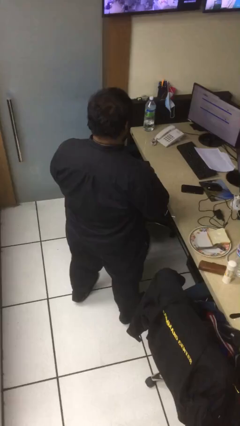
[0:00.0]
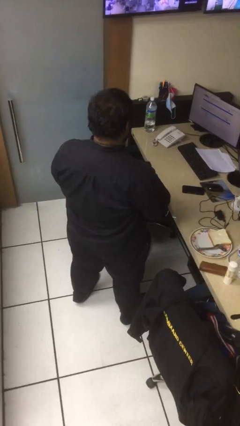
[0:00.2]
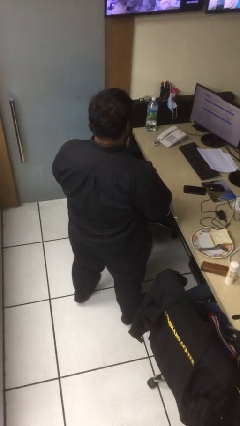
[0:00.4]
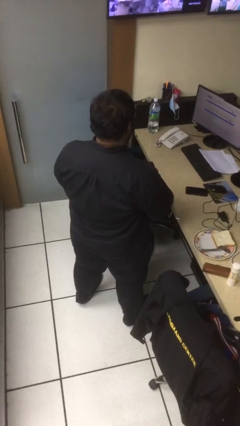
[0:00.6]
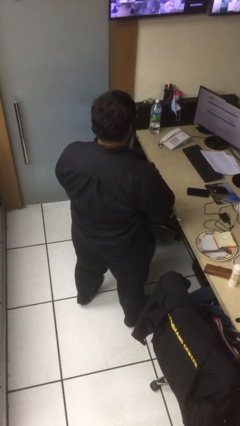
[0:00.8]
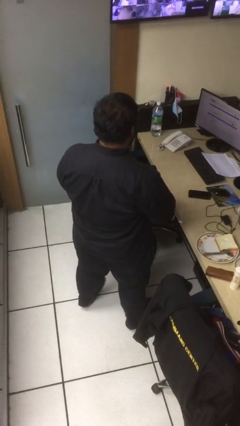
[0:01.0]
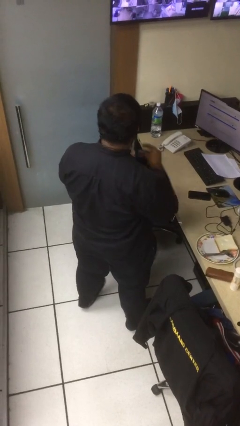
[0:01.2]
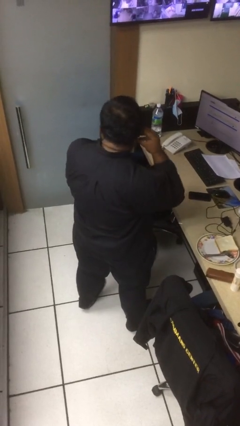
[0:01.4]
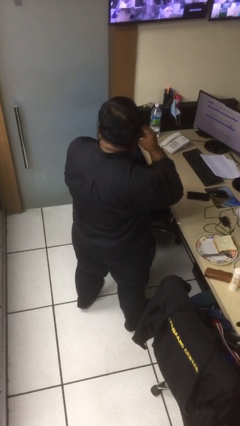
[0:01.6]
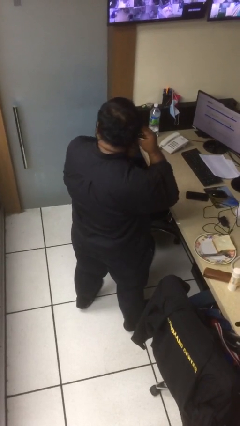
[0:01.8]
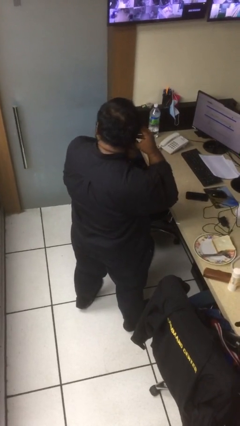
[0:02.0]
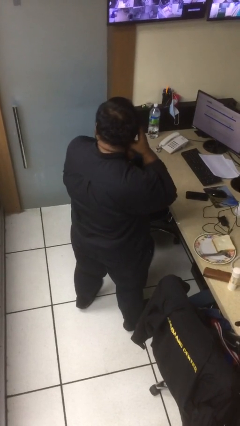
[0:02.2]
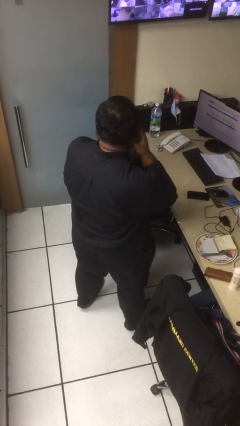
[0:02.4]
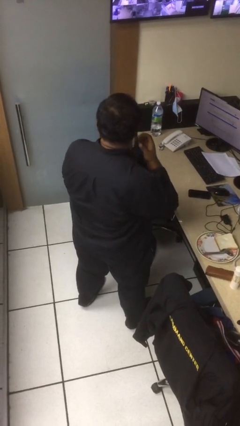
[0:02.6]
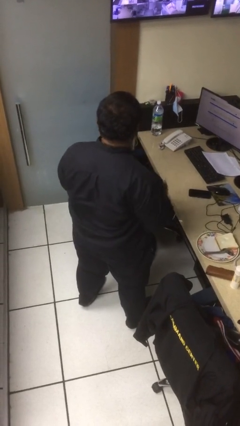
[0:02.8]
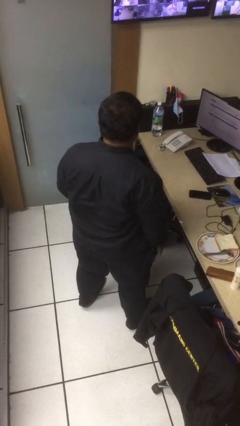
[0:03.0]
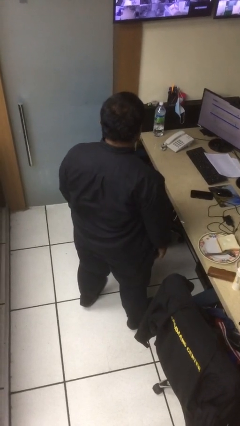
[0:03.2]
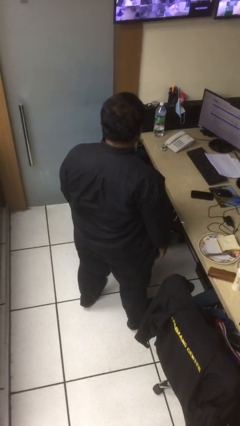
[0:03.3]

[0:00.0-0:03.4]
person puts on earrings

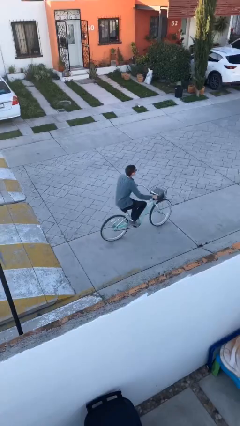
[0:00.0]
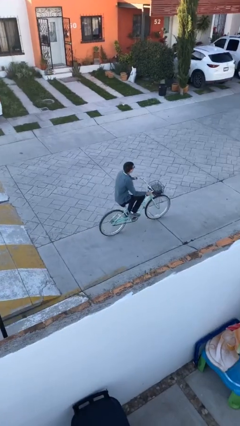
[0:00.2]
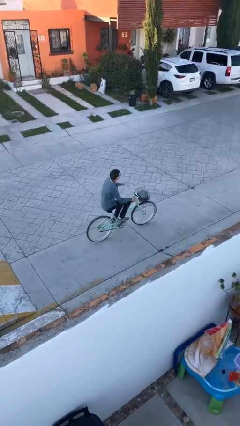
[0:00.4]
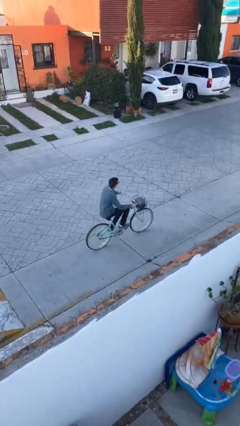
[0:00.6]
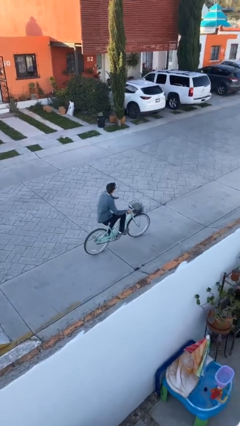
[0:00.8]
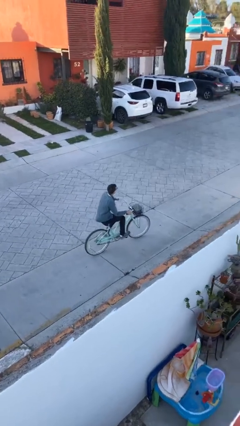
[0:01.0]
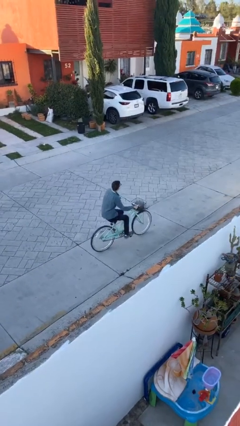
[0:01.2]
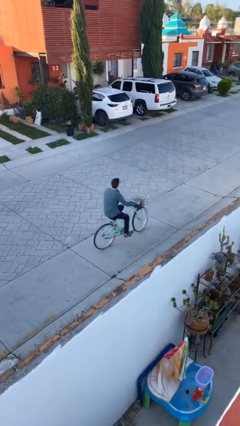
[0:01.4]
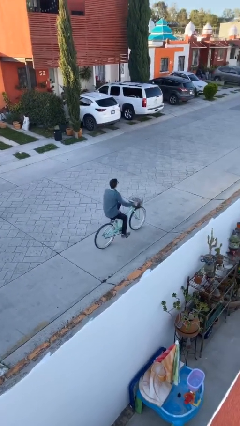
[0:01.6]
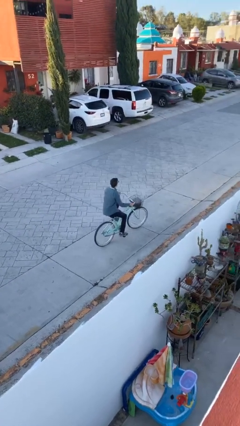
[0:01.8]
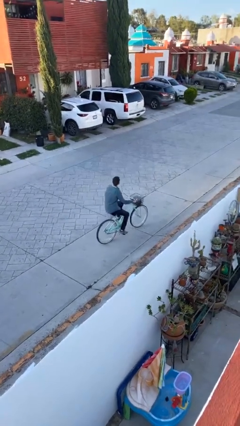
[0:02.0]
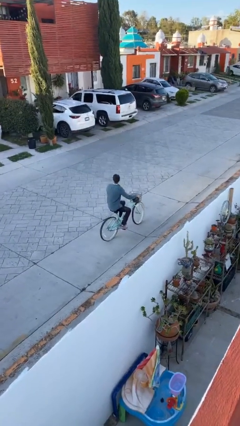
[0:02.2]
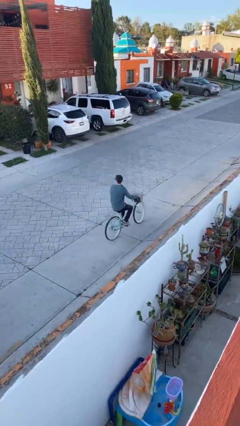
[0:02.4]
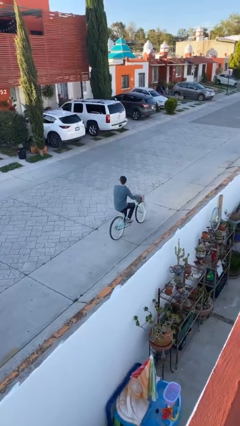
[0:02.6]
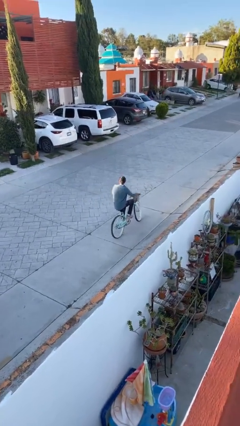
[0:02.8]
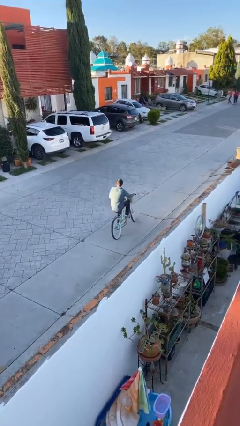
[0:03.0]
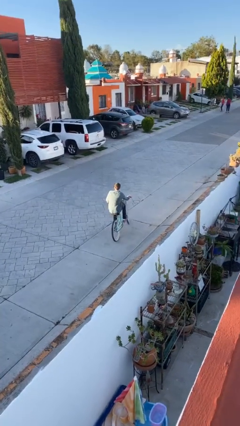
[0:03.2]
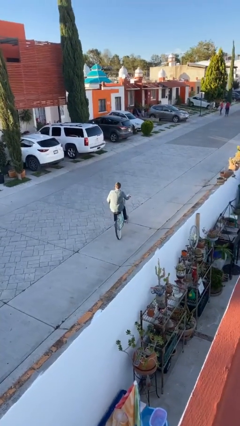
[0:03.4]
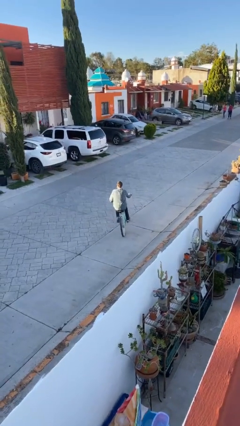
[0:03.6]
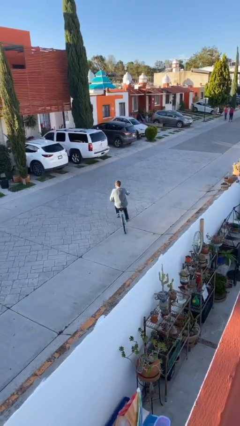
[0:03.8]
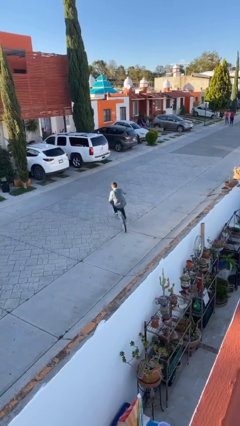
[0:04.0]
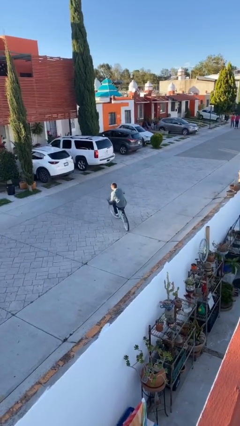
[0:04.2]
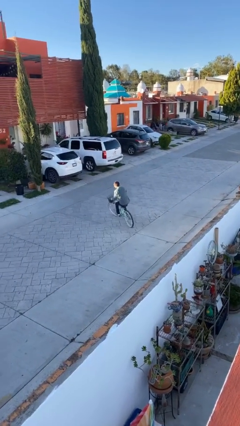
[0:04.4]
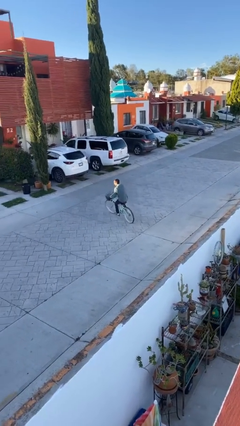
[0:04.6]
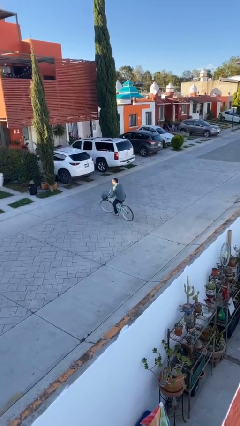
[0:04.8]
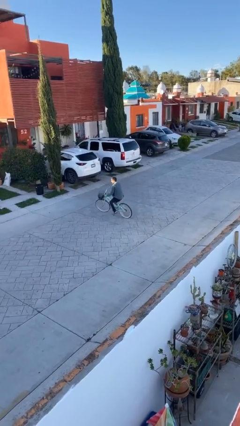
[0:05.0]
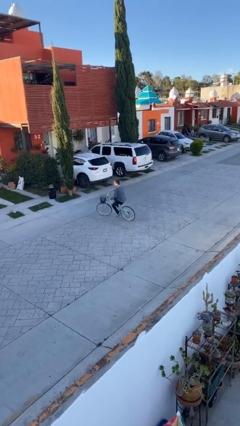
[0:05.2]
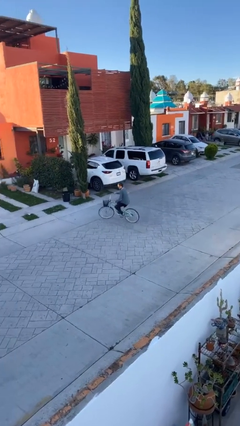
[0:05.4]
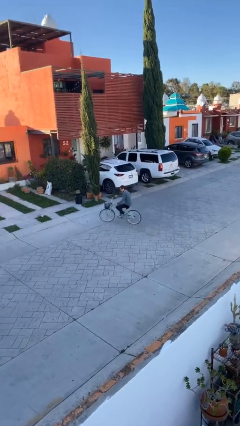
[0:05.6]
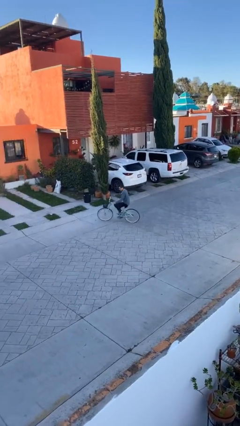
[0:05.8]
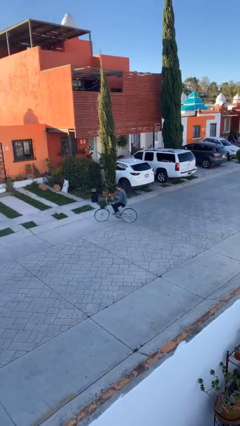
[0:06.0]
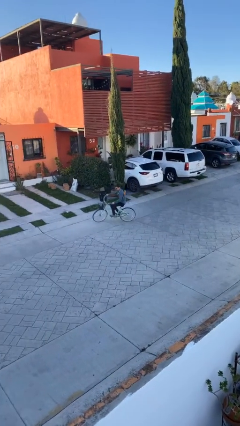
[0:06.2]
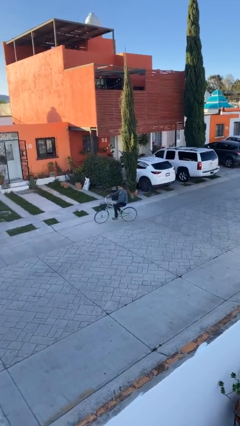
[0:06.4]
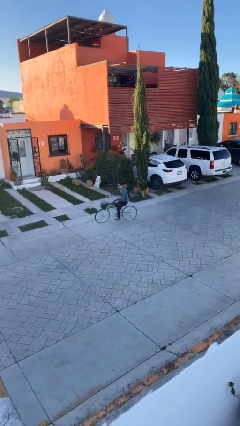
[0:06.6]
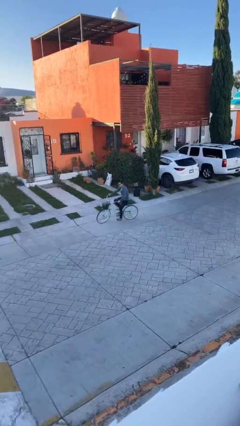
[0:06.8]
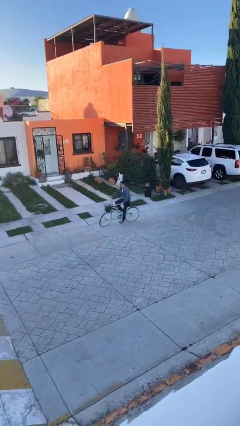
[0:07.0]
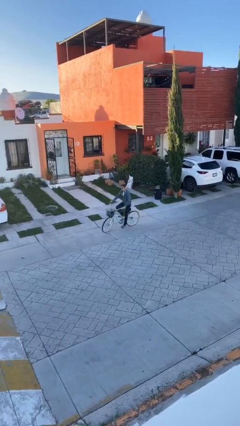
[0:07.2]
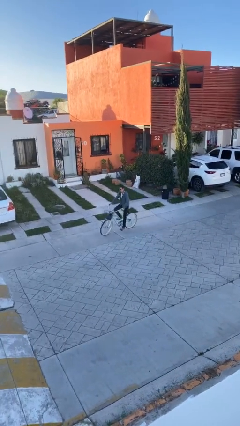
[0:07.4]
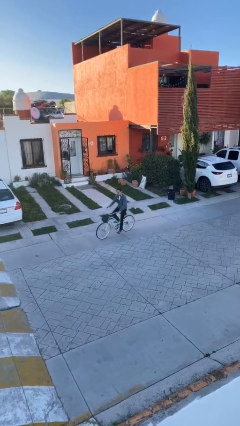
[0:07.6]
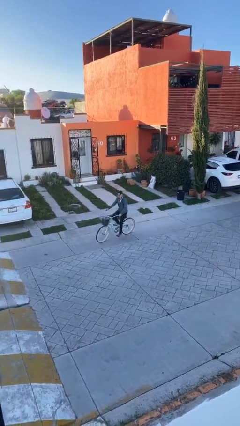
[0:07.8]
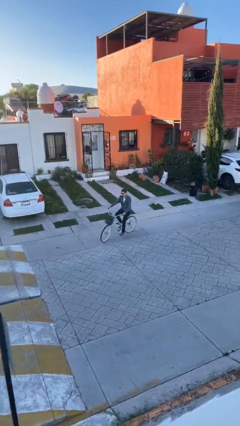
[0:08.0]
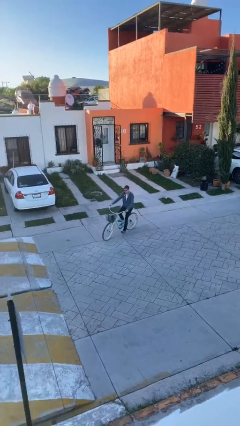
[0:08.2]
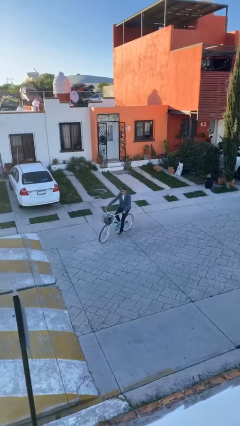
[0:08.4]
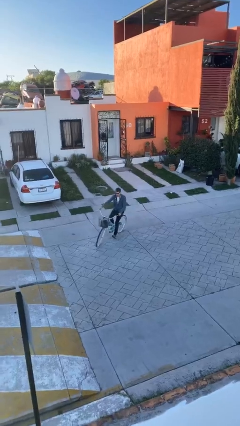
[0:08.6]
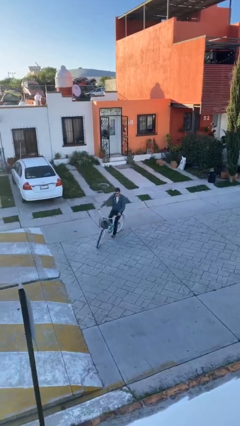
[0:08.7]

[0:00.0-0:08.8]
person rides bicycle

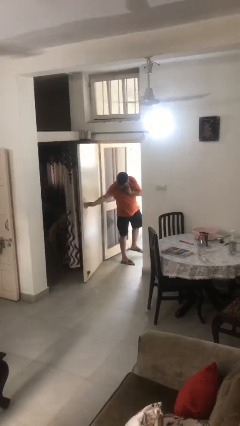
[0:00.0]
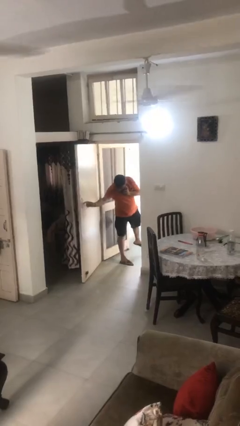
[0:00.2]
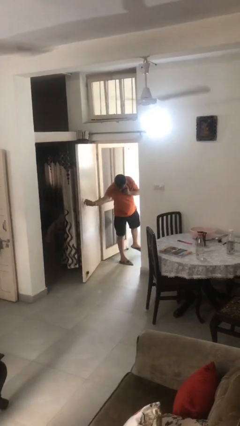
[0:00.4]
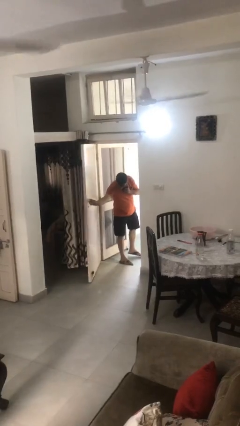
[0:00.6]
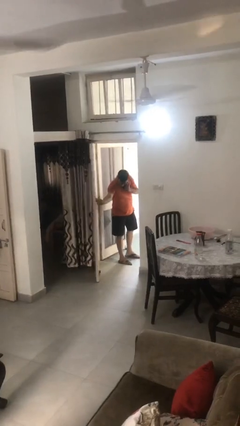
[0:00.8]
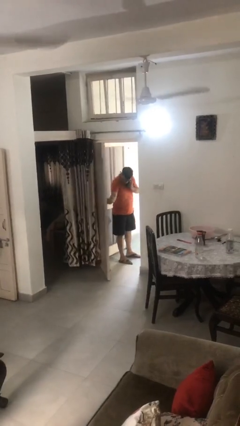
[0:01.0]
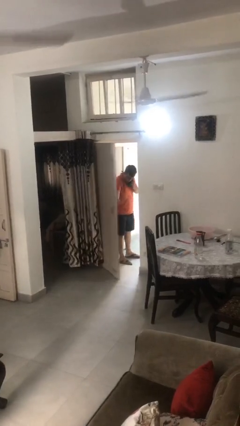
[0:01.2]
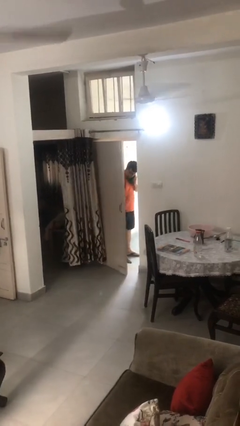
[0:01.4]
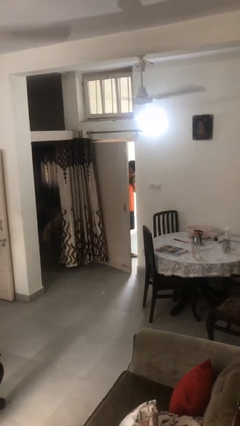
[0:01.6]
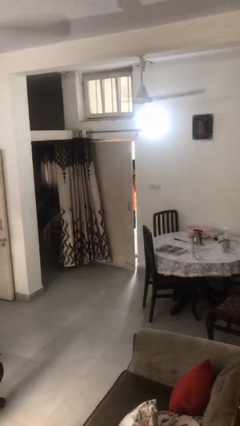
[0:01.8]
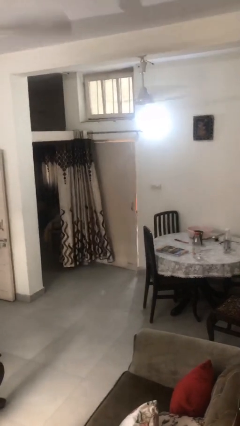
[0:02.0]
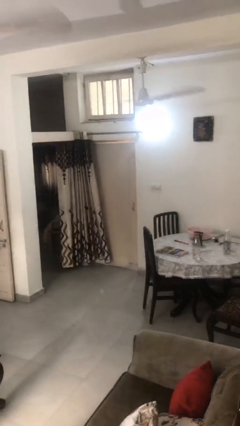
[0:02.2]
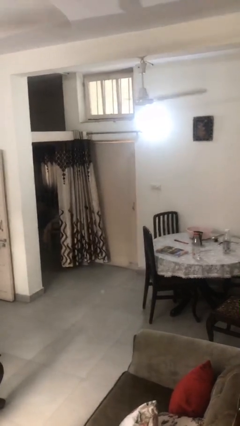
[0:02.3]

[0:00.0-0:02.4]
person closes facility door

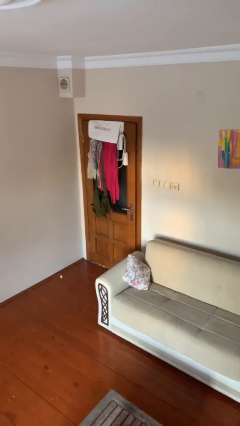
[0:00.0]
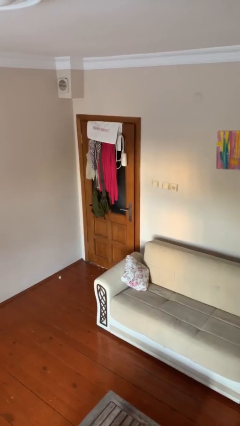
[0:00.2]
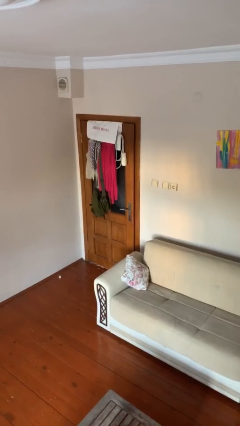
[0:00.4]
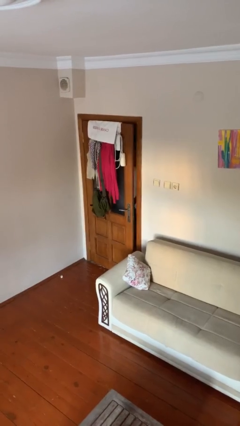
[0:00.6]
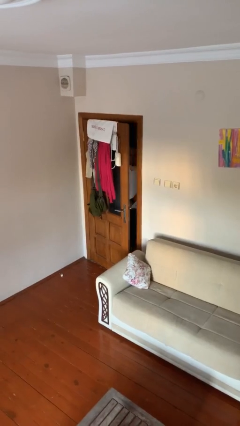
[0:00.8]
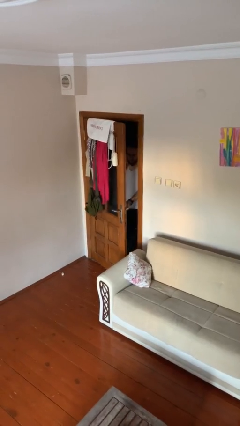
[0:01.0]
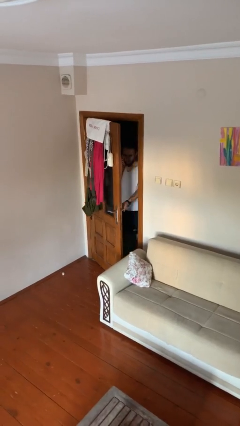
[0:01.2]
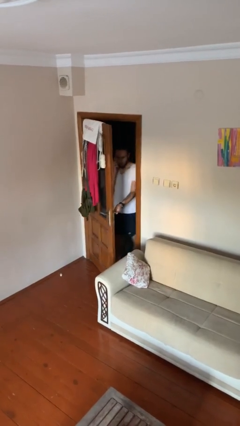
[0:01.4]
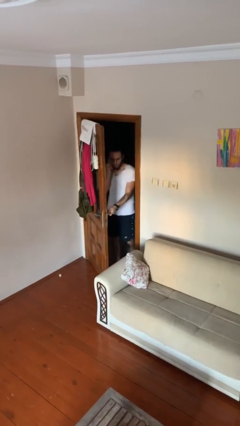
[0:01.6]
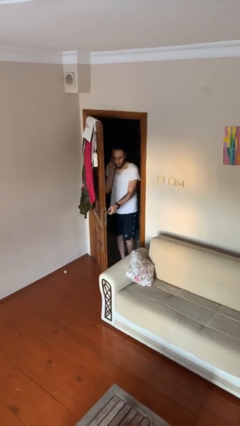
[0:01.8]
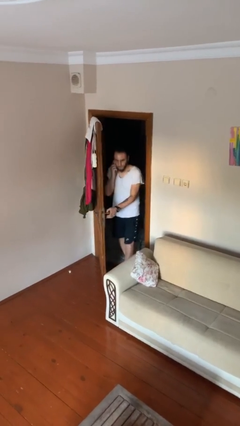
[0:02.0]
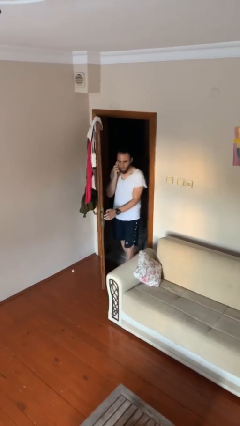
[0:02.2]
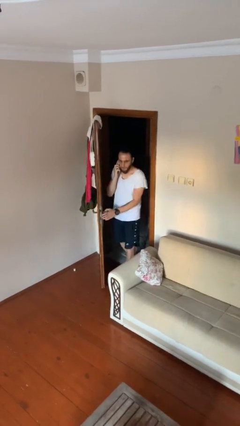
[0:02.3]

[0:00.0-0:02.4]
person opens facility door

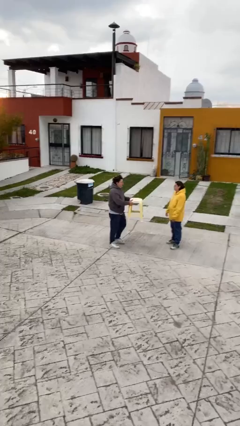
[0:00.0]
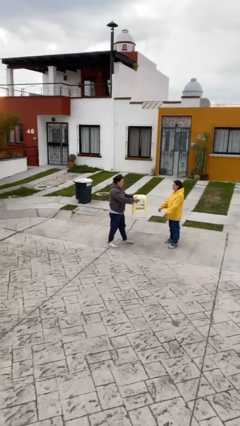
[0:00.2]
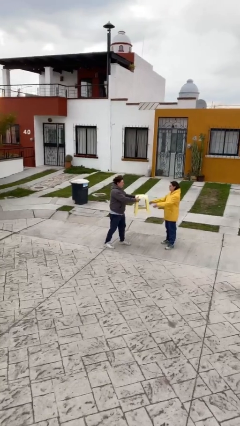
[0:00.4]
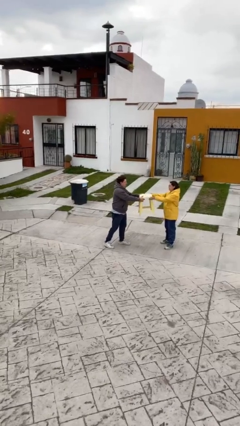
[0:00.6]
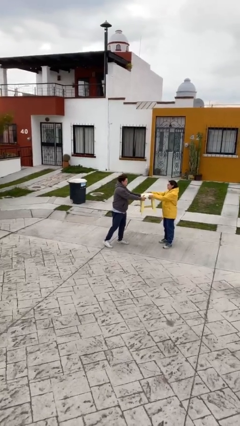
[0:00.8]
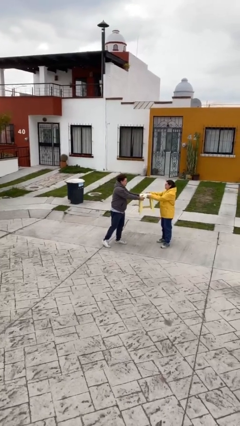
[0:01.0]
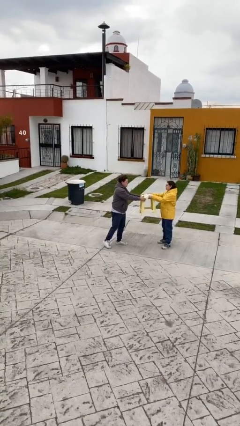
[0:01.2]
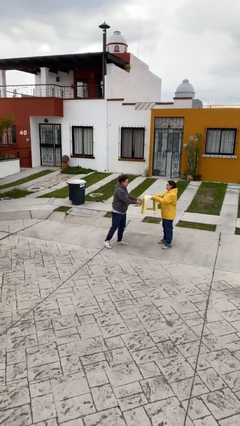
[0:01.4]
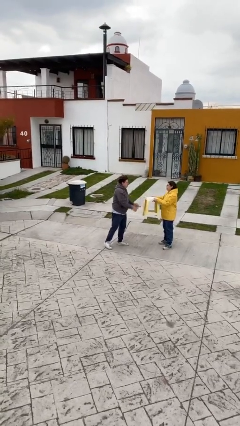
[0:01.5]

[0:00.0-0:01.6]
person transfers object to person
